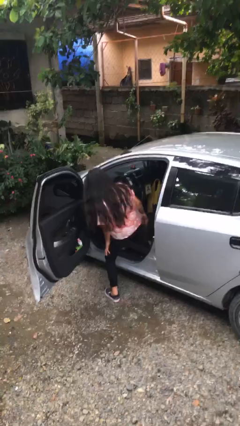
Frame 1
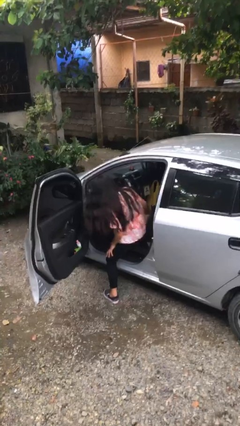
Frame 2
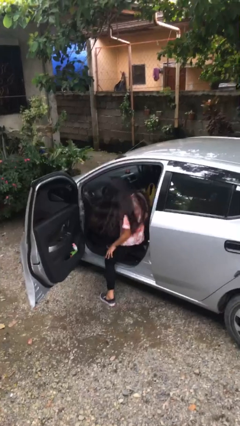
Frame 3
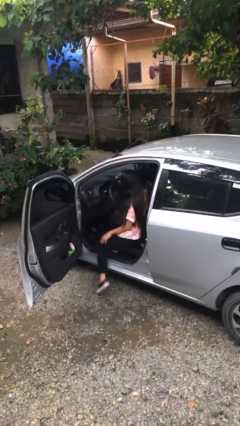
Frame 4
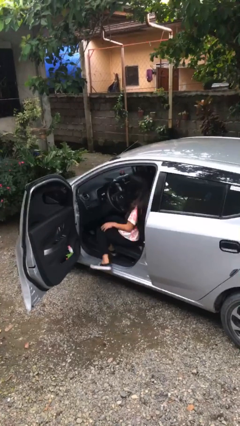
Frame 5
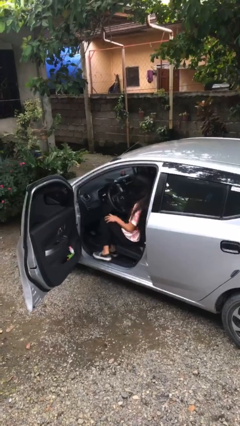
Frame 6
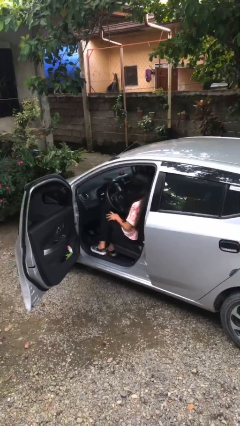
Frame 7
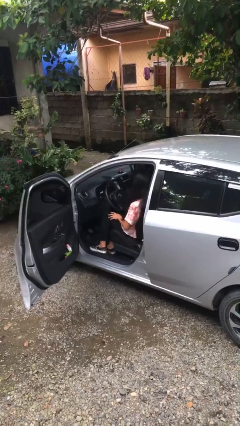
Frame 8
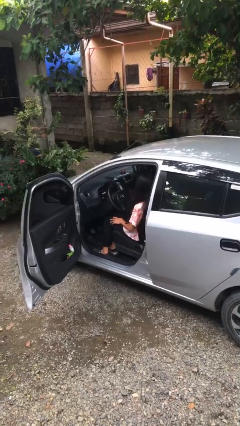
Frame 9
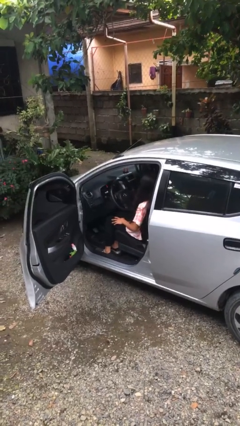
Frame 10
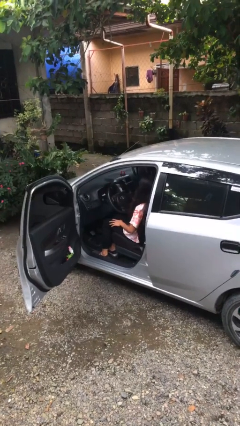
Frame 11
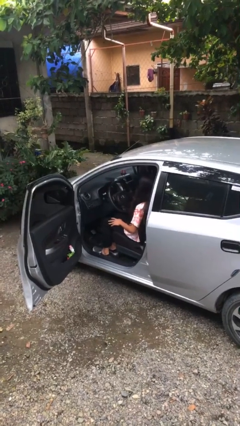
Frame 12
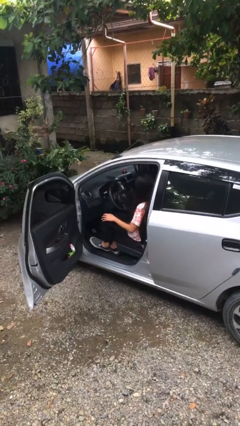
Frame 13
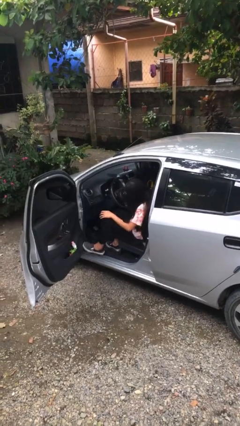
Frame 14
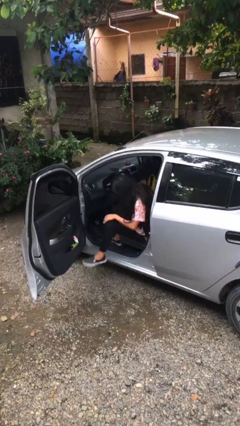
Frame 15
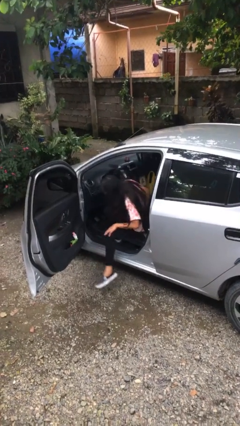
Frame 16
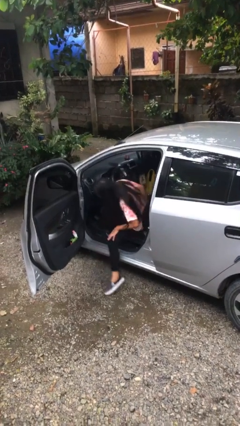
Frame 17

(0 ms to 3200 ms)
person enters car

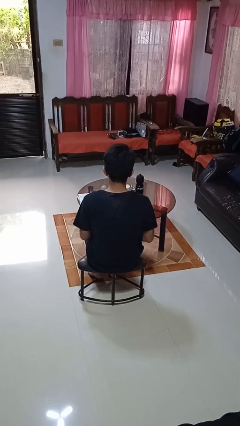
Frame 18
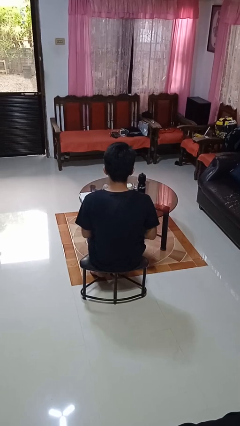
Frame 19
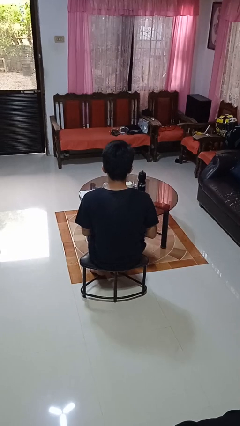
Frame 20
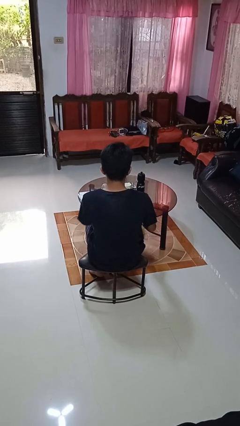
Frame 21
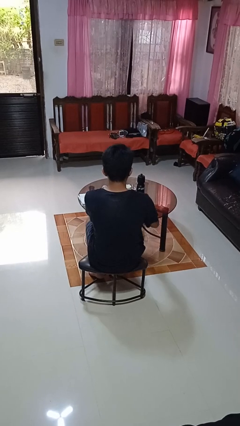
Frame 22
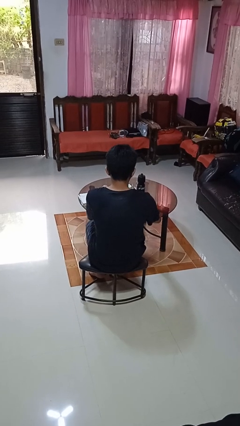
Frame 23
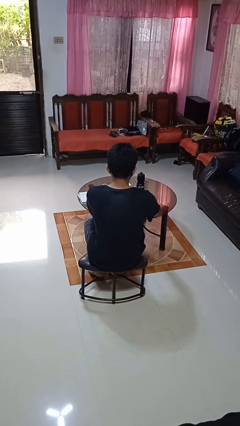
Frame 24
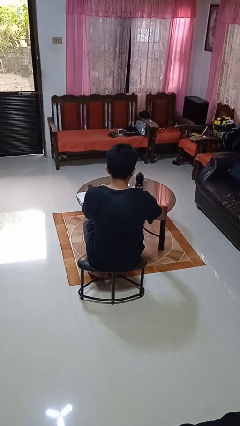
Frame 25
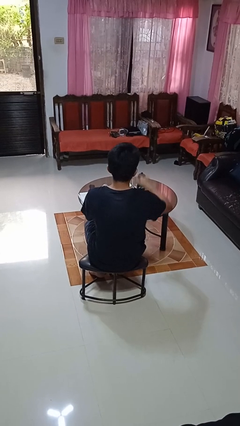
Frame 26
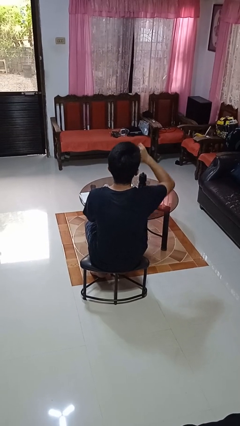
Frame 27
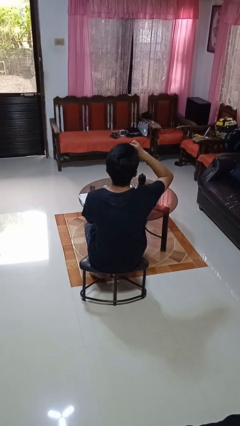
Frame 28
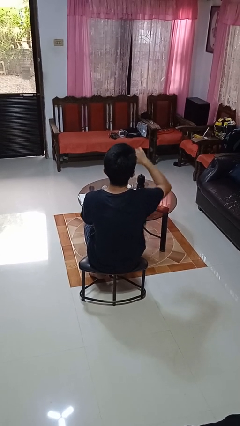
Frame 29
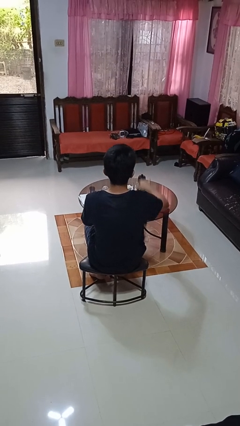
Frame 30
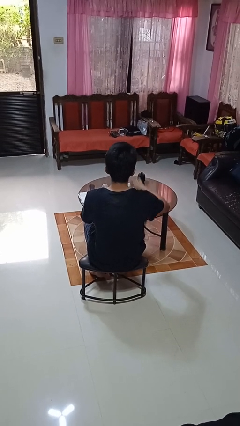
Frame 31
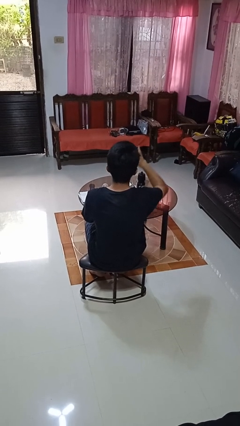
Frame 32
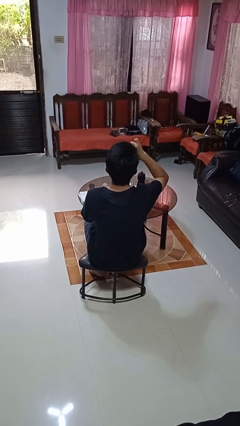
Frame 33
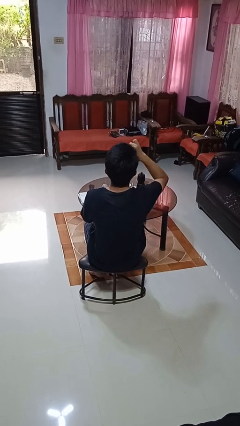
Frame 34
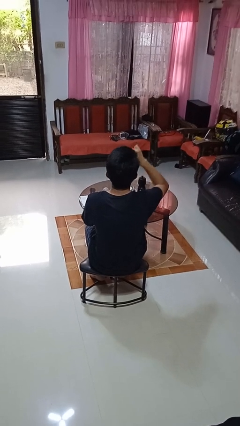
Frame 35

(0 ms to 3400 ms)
person eats with utensil

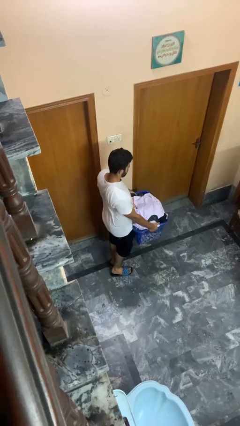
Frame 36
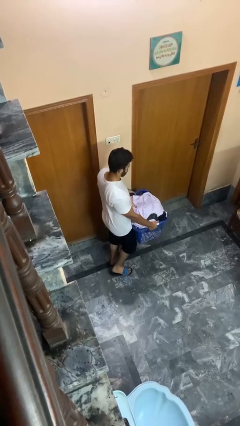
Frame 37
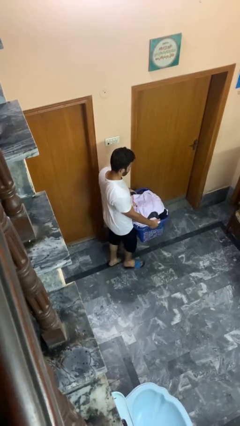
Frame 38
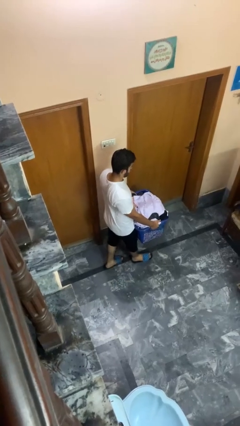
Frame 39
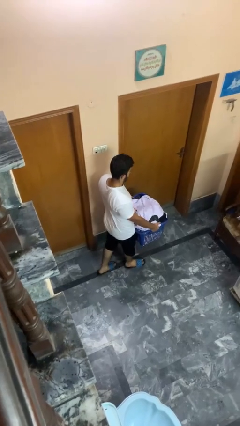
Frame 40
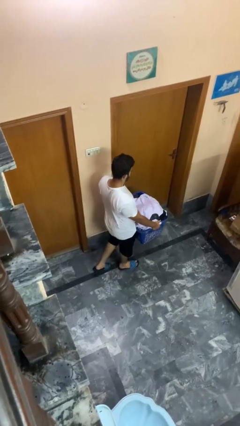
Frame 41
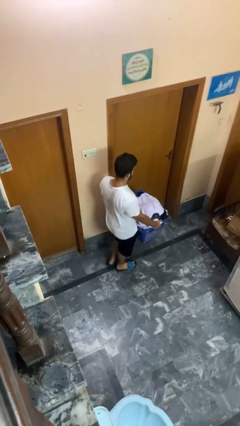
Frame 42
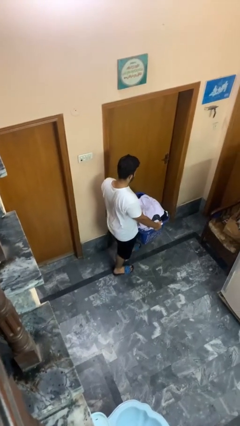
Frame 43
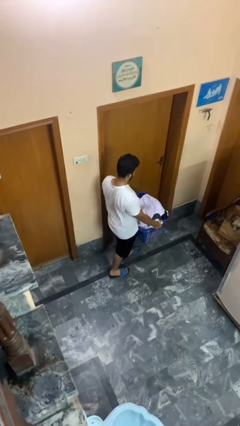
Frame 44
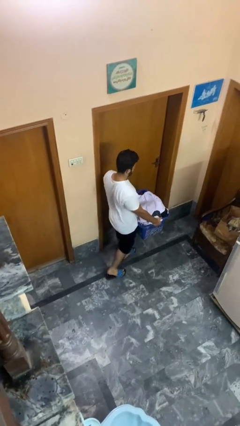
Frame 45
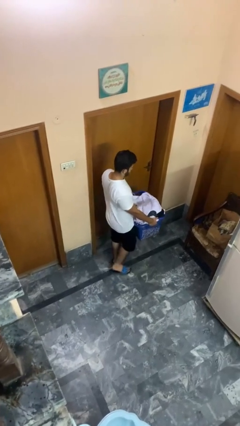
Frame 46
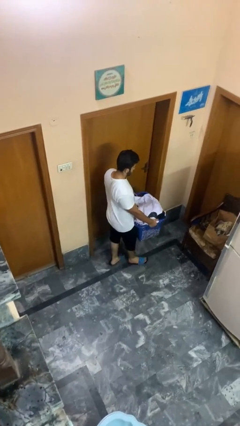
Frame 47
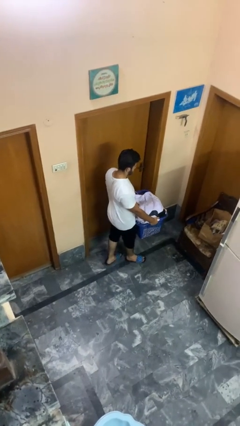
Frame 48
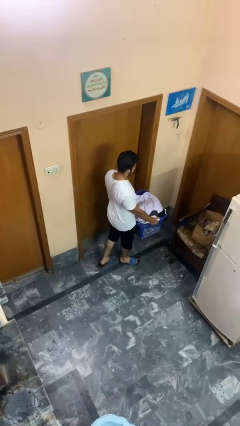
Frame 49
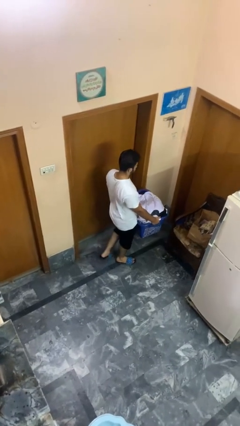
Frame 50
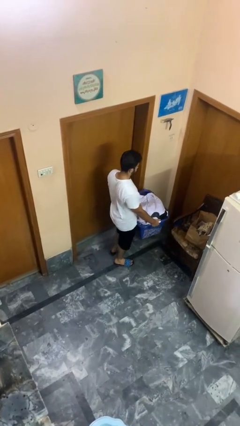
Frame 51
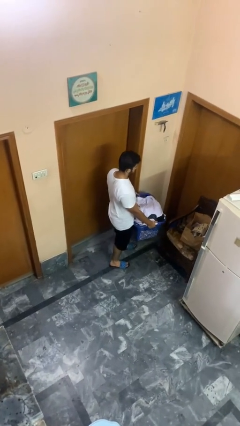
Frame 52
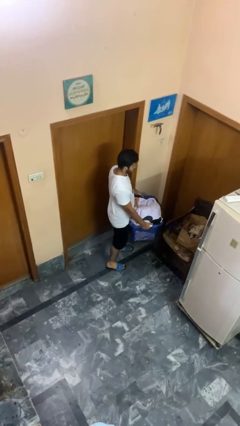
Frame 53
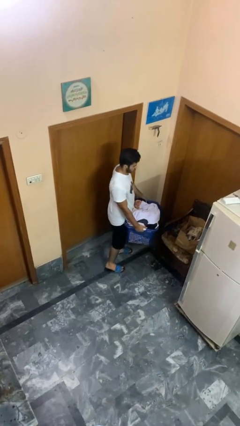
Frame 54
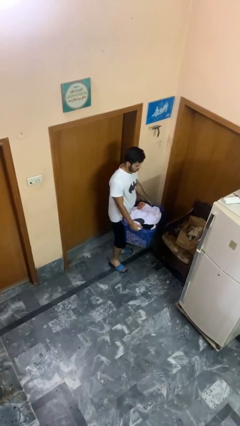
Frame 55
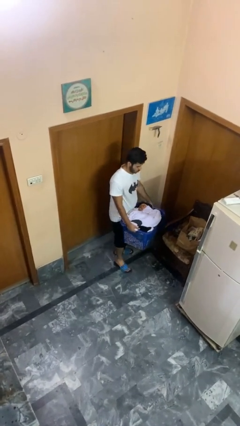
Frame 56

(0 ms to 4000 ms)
person carries laundry basket

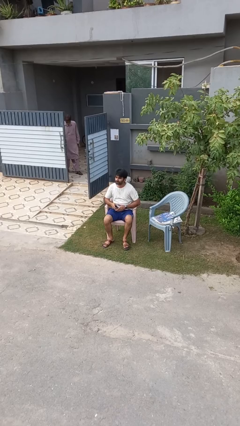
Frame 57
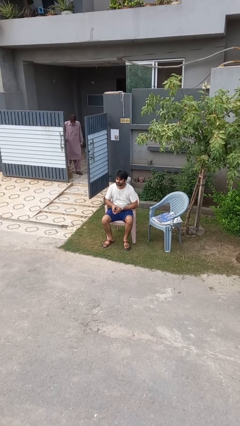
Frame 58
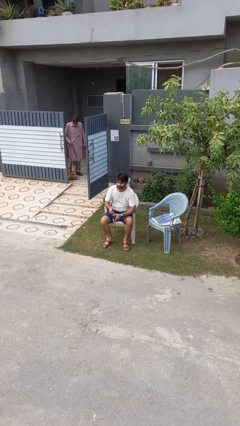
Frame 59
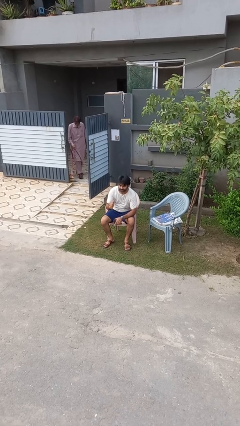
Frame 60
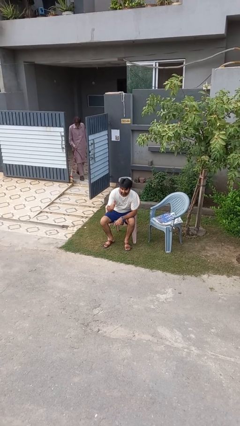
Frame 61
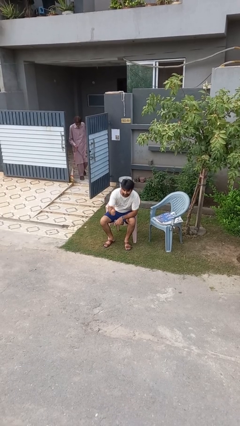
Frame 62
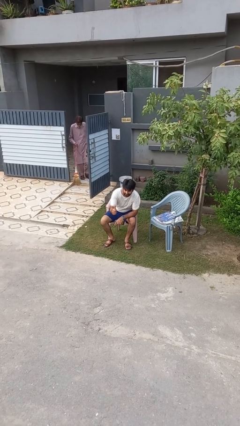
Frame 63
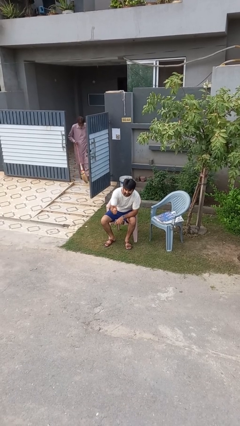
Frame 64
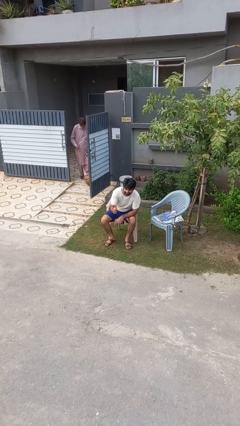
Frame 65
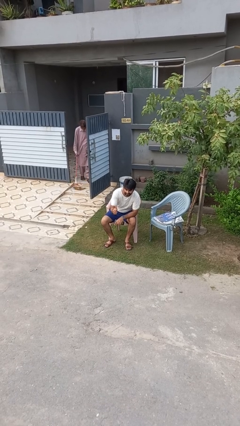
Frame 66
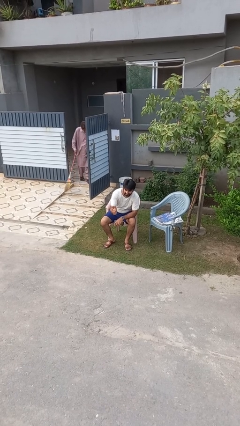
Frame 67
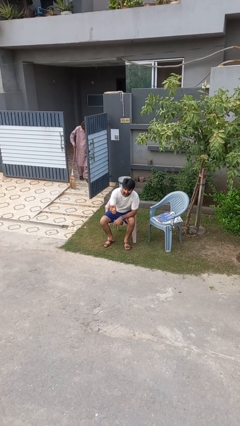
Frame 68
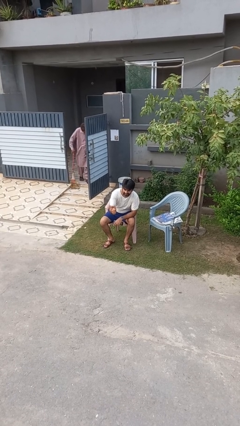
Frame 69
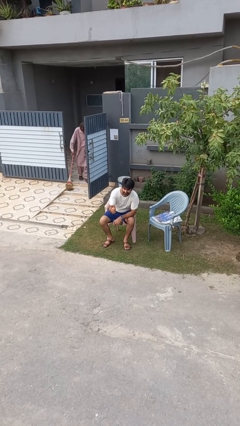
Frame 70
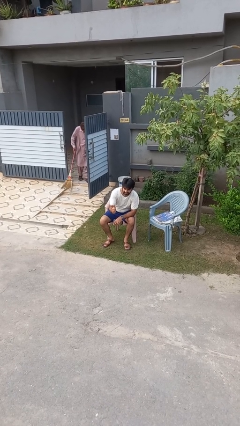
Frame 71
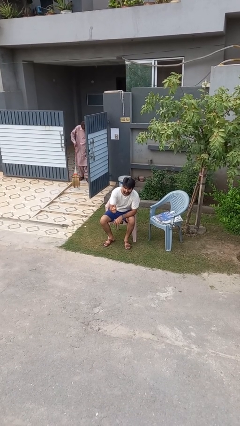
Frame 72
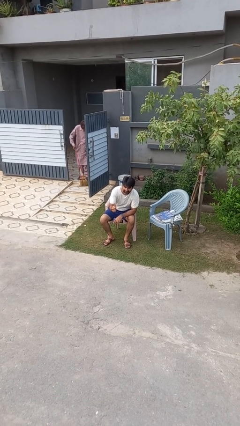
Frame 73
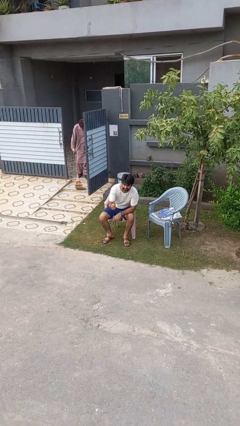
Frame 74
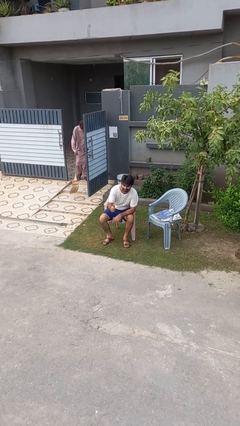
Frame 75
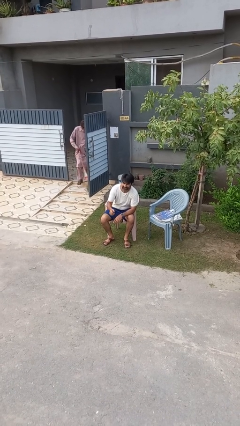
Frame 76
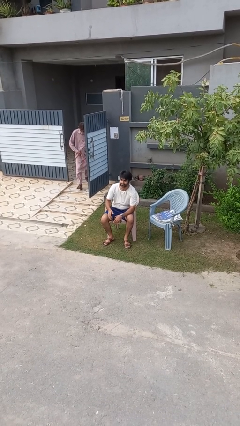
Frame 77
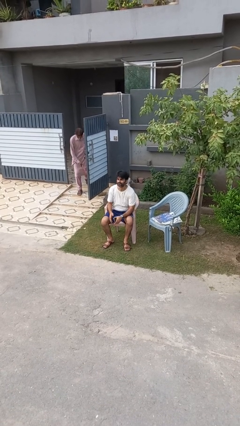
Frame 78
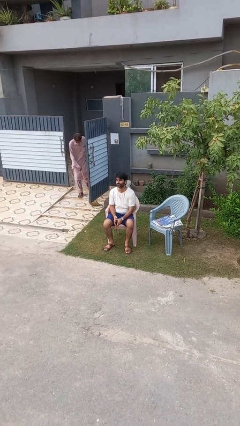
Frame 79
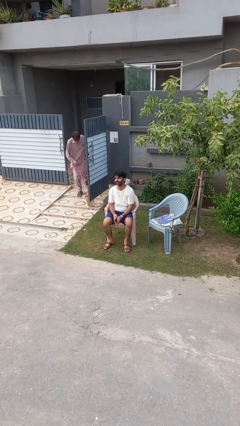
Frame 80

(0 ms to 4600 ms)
person gestures thumbs up

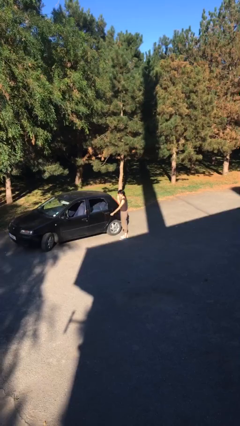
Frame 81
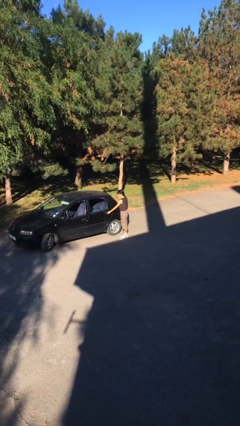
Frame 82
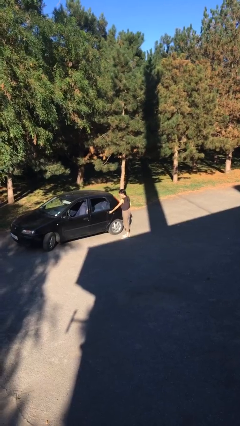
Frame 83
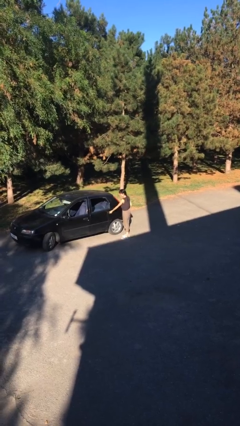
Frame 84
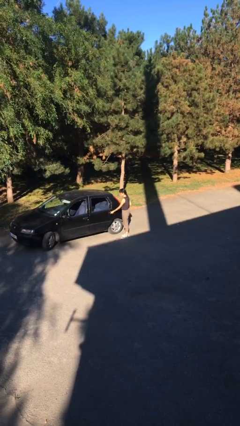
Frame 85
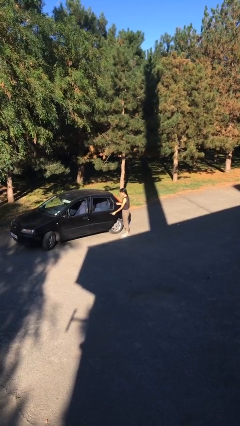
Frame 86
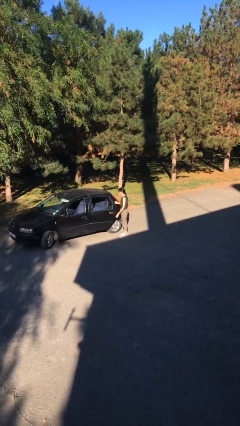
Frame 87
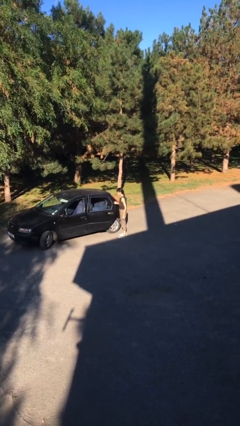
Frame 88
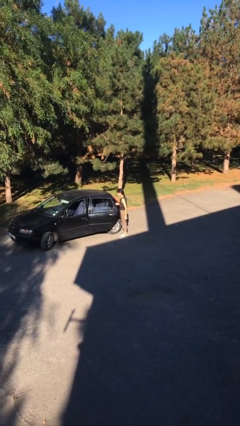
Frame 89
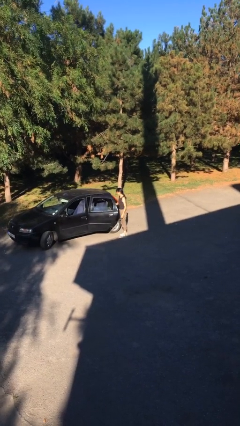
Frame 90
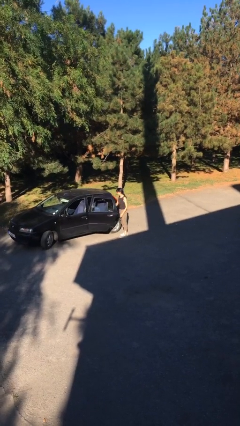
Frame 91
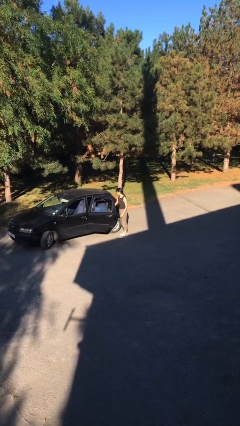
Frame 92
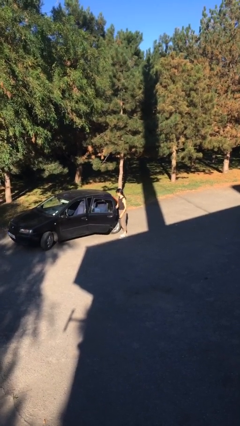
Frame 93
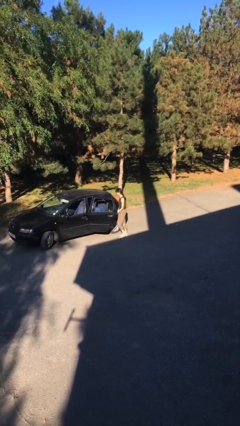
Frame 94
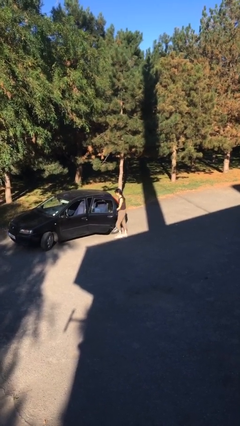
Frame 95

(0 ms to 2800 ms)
person opens car door
